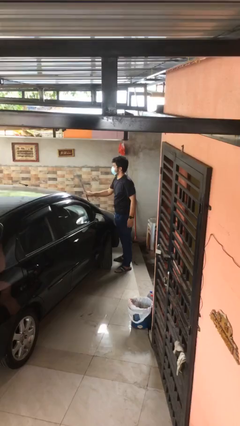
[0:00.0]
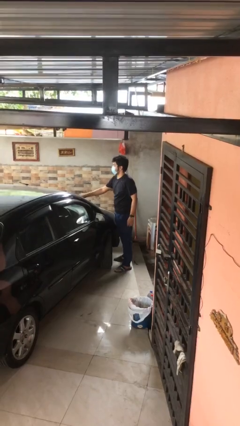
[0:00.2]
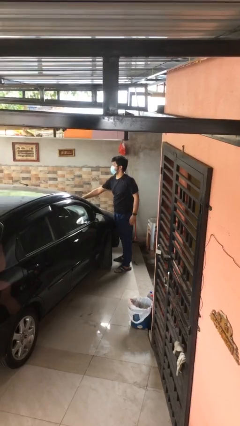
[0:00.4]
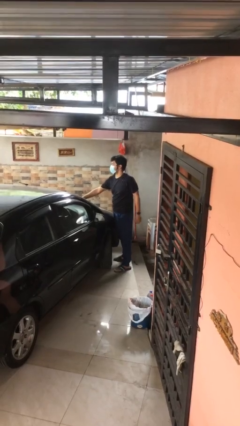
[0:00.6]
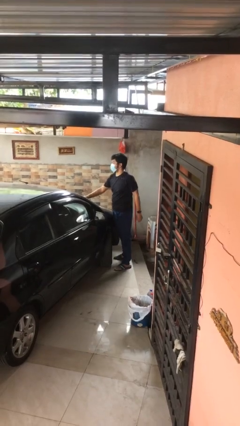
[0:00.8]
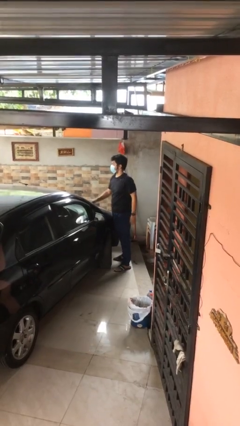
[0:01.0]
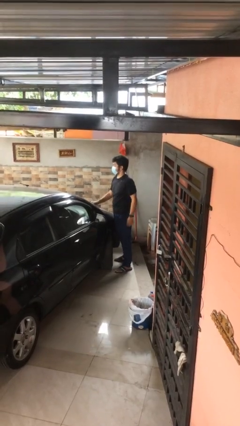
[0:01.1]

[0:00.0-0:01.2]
person flips down car wipers

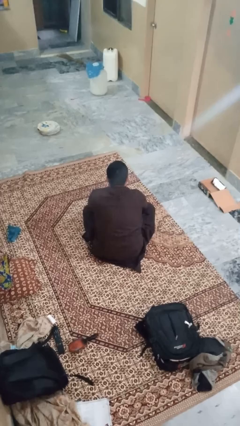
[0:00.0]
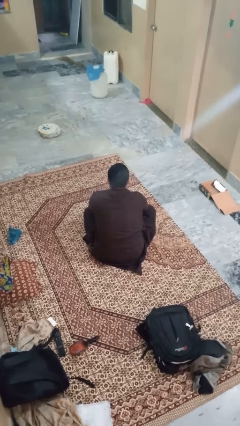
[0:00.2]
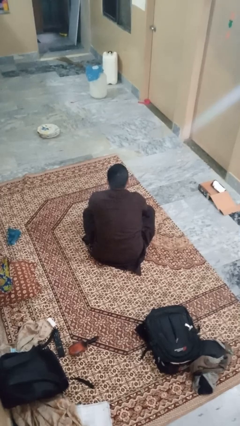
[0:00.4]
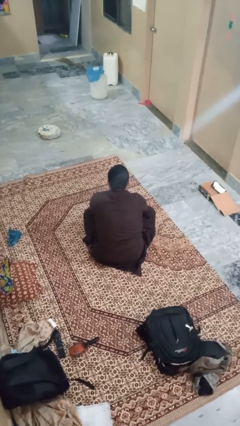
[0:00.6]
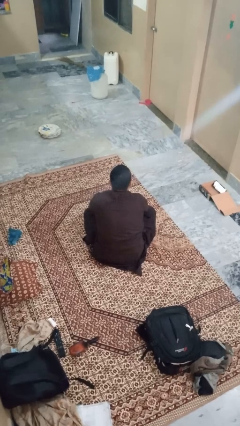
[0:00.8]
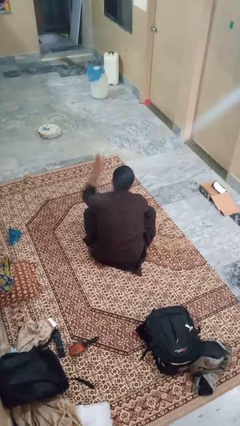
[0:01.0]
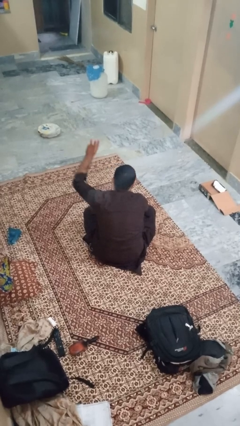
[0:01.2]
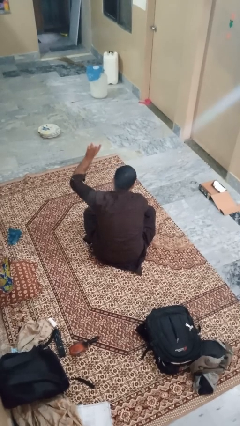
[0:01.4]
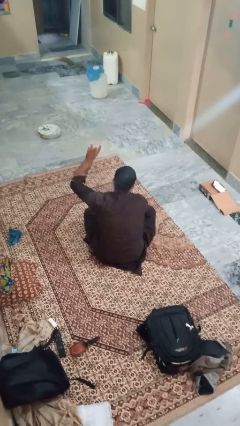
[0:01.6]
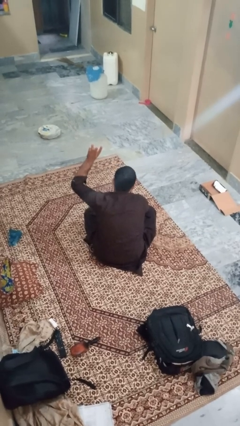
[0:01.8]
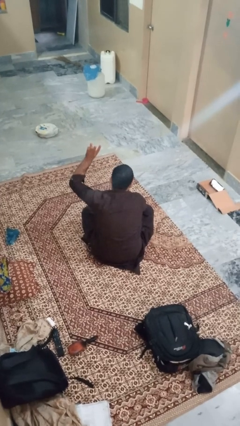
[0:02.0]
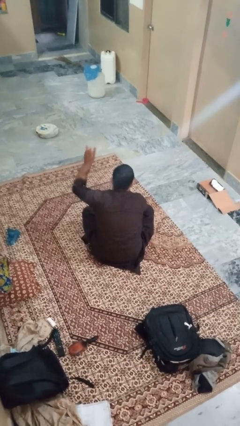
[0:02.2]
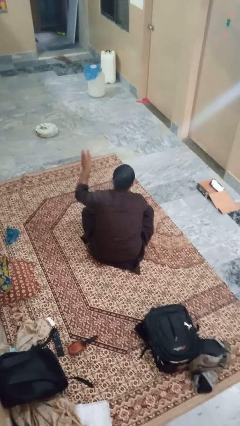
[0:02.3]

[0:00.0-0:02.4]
person gestures number three

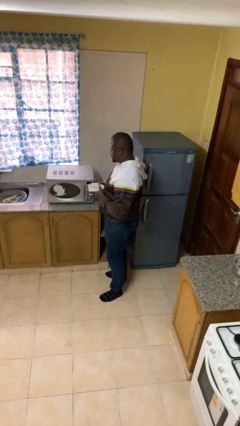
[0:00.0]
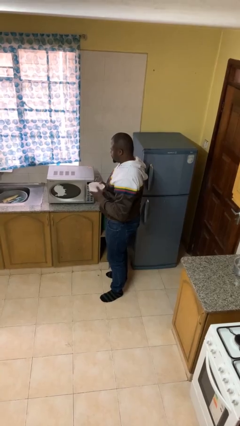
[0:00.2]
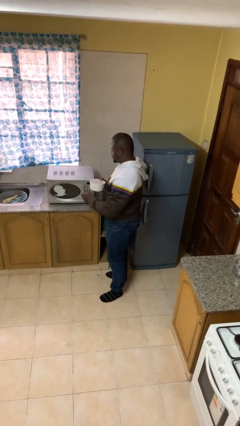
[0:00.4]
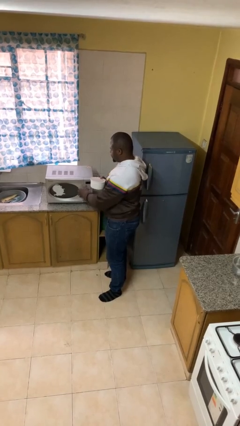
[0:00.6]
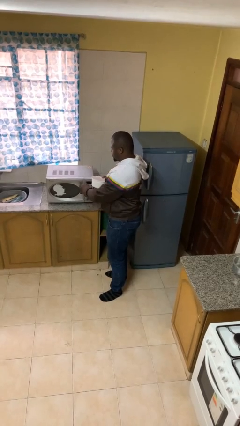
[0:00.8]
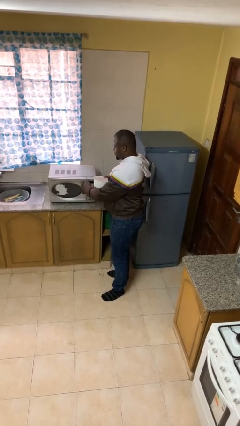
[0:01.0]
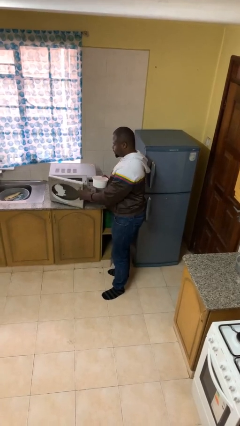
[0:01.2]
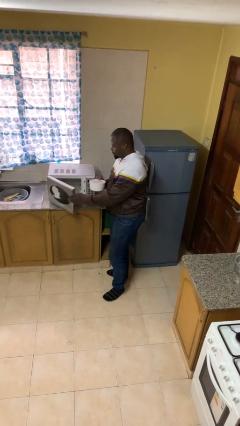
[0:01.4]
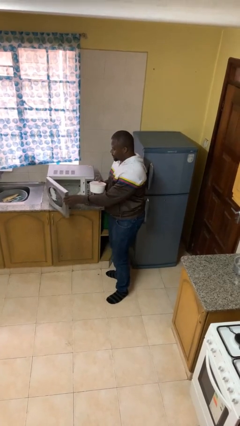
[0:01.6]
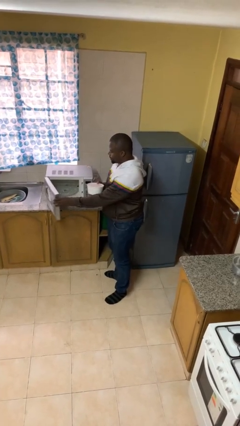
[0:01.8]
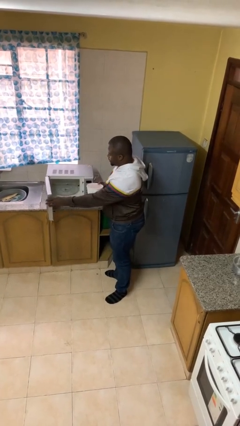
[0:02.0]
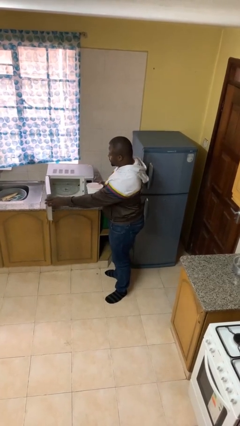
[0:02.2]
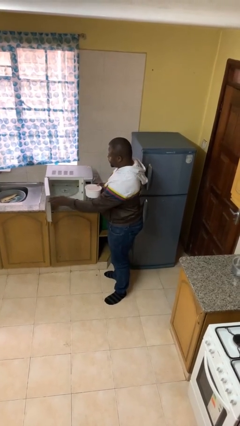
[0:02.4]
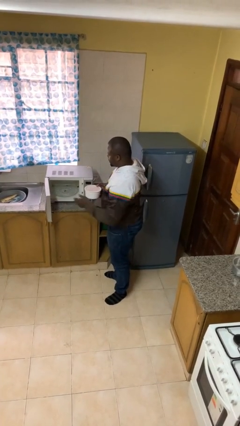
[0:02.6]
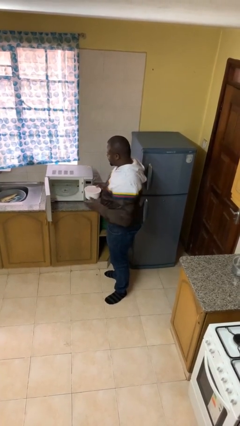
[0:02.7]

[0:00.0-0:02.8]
person opens microwave

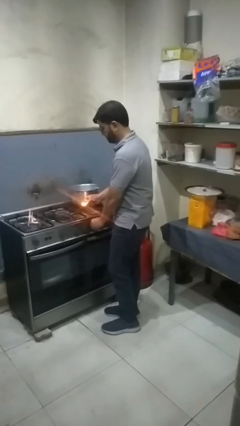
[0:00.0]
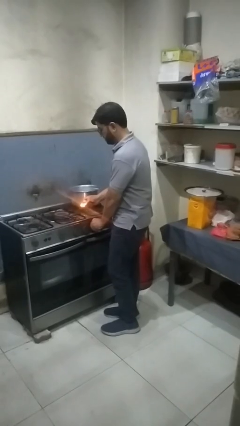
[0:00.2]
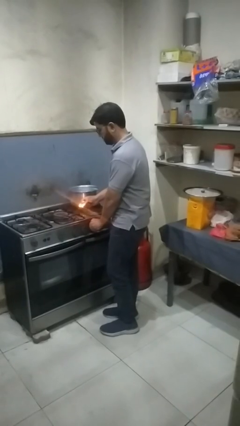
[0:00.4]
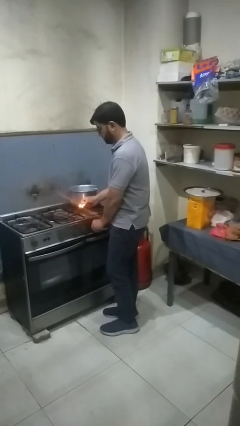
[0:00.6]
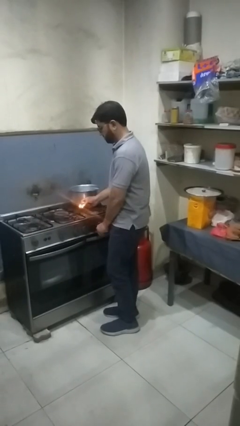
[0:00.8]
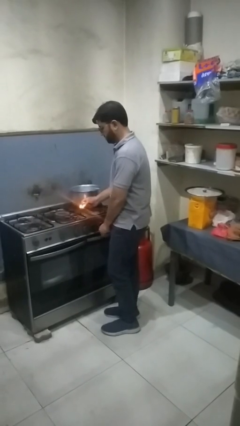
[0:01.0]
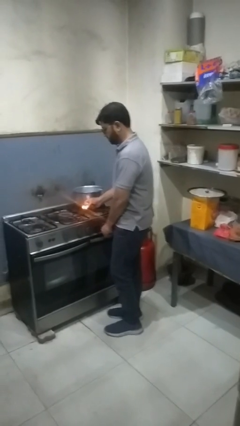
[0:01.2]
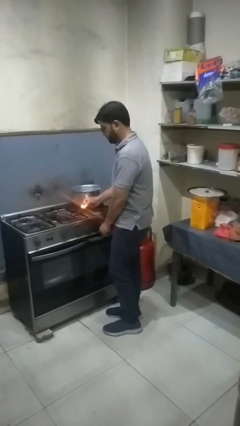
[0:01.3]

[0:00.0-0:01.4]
person turns off stovetop

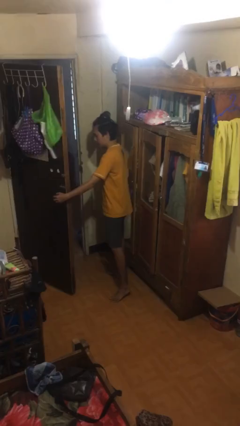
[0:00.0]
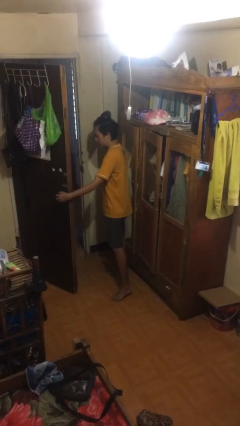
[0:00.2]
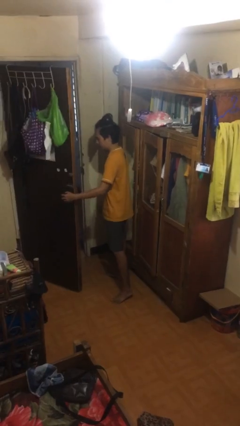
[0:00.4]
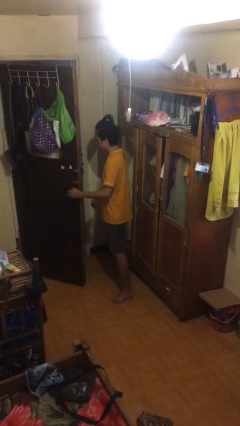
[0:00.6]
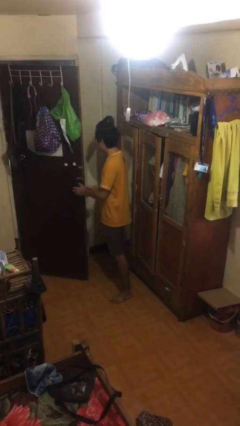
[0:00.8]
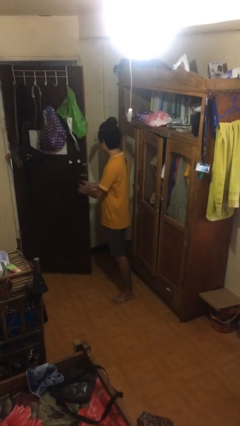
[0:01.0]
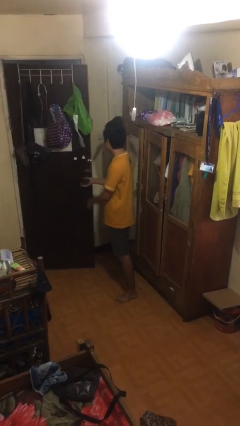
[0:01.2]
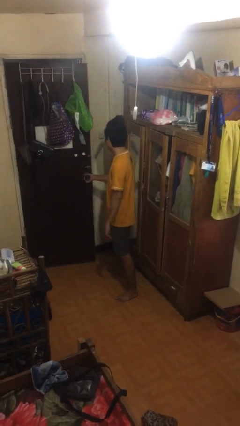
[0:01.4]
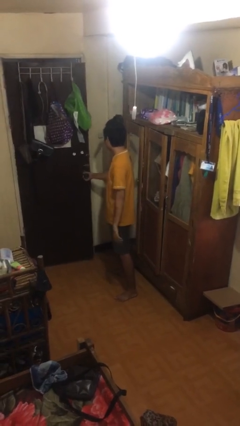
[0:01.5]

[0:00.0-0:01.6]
person closes facility door

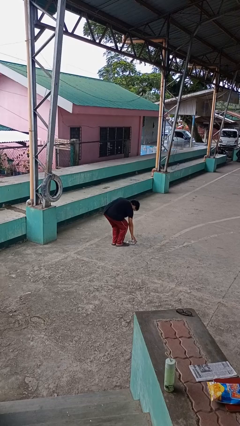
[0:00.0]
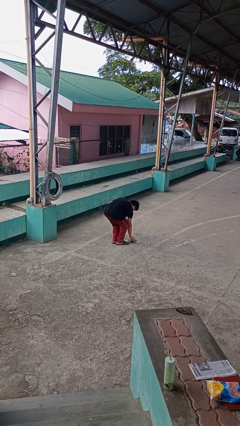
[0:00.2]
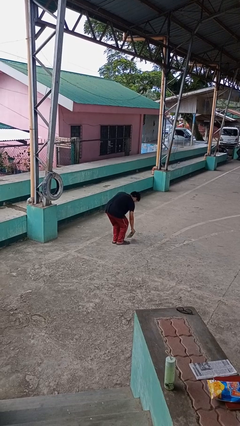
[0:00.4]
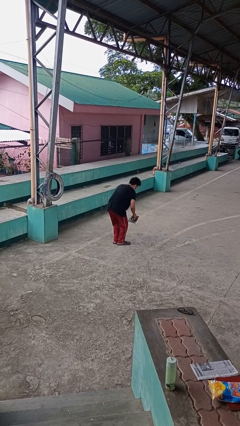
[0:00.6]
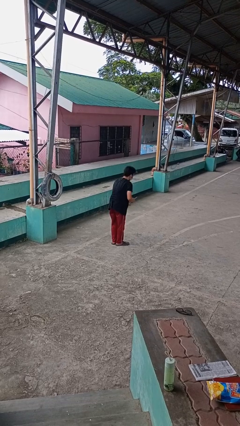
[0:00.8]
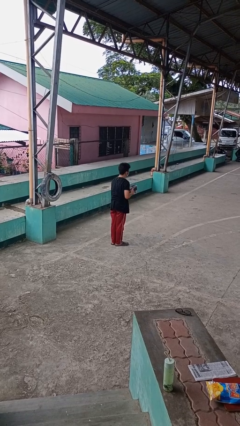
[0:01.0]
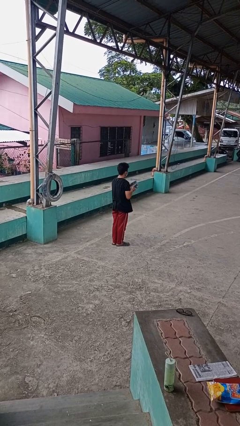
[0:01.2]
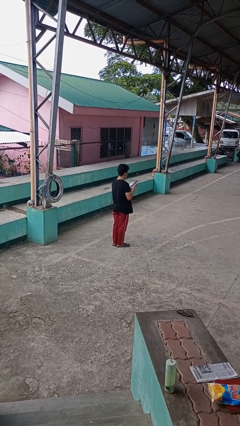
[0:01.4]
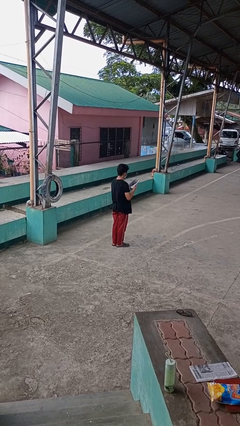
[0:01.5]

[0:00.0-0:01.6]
person picks up object from floor

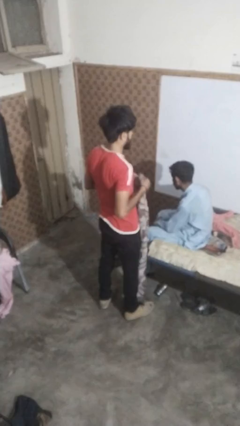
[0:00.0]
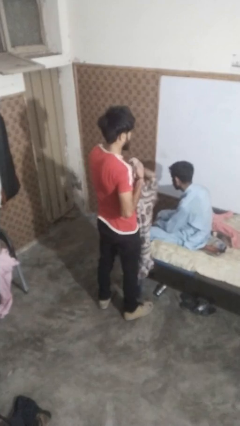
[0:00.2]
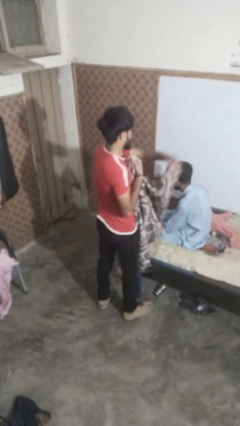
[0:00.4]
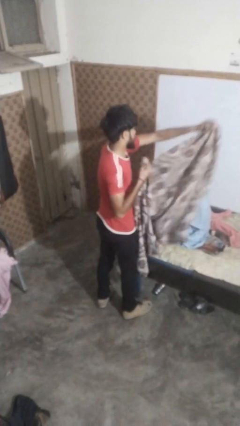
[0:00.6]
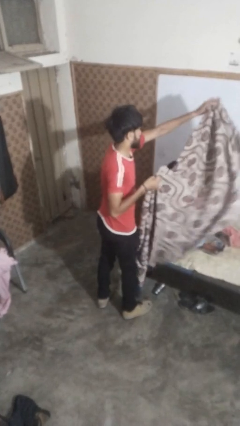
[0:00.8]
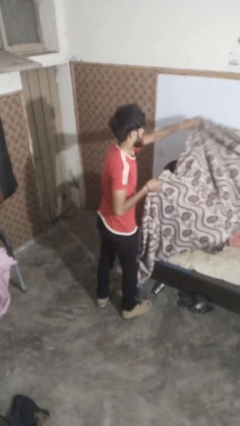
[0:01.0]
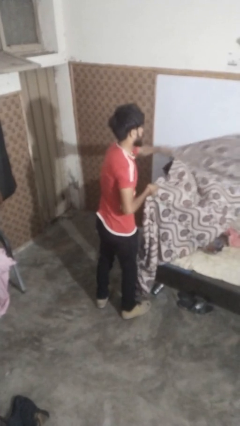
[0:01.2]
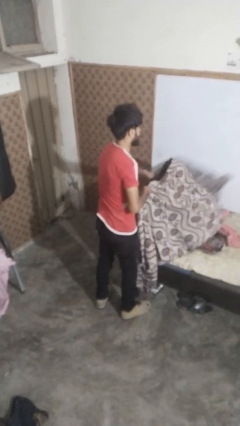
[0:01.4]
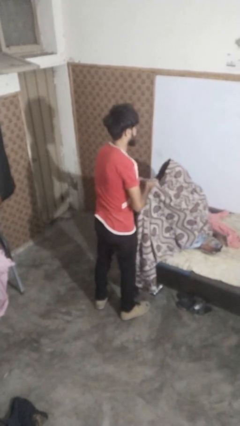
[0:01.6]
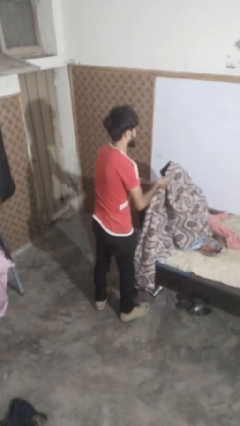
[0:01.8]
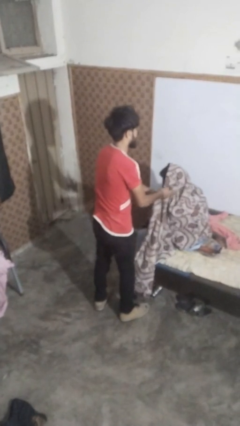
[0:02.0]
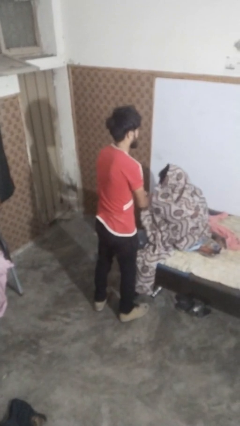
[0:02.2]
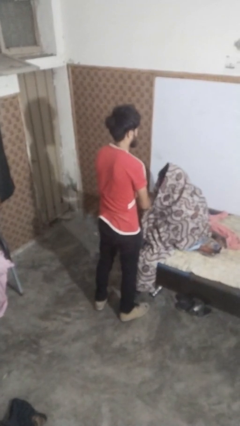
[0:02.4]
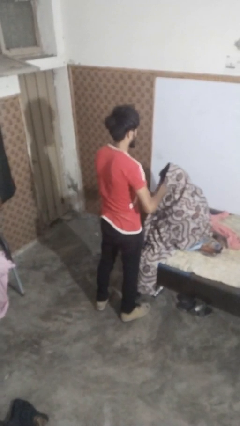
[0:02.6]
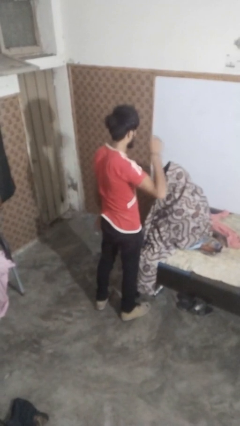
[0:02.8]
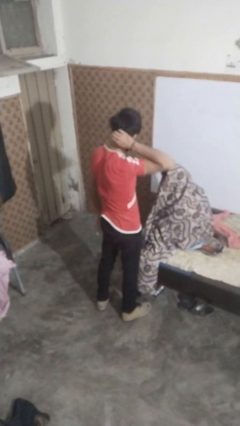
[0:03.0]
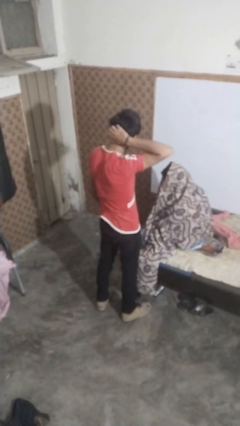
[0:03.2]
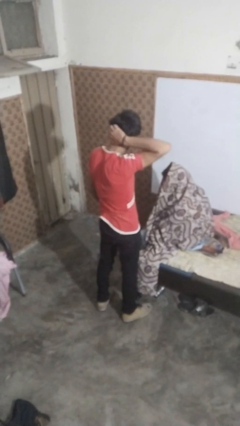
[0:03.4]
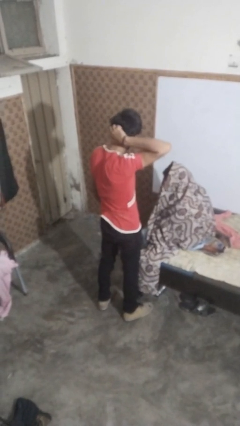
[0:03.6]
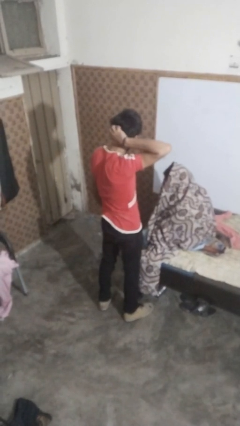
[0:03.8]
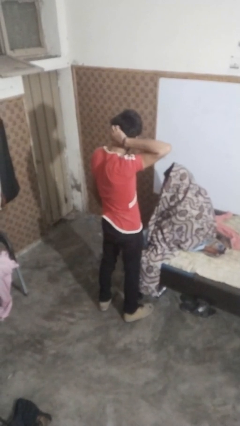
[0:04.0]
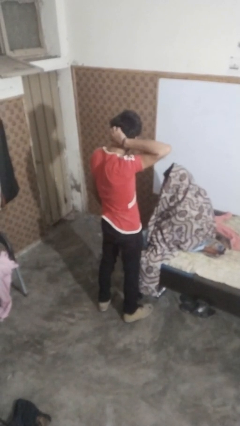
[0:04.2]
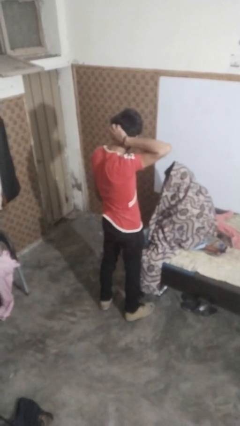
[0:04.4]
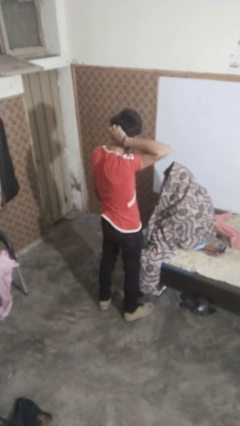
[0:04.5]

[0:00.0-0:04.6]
person covers friend with blanket

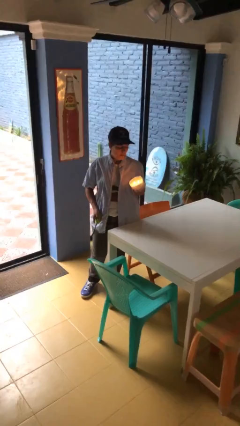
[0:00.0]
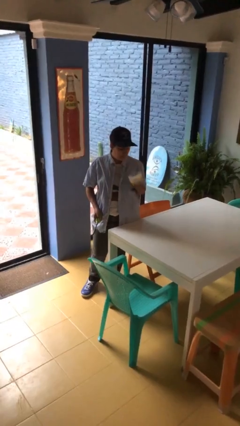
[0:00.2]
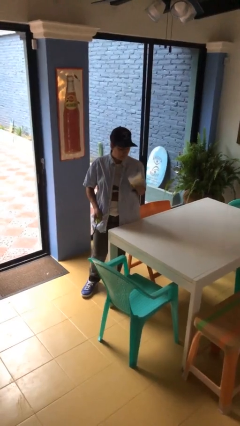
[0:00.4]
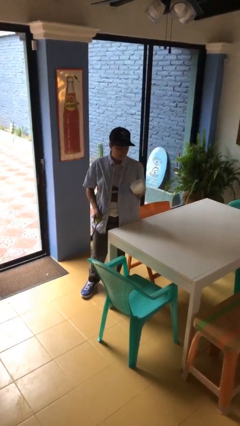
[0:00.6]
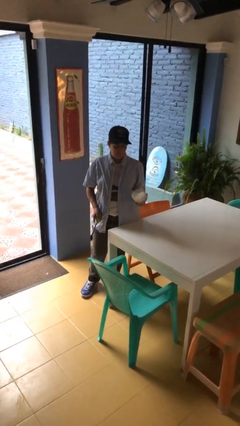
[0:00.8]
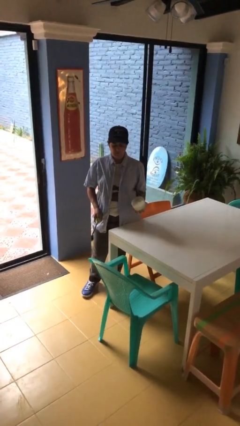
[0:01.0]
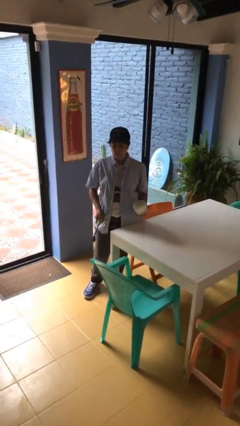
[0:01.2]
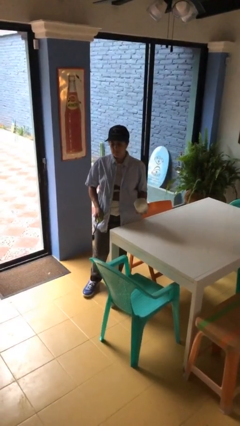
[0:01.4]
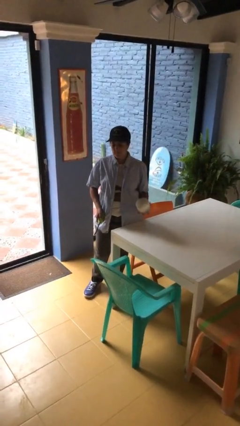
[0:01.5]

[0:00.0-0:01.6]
person extinguishes candle
